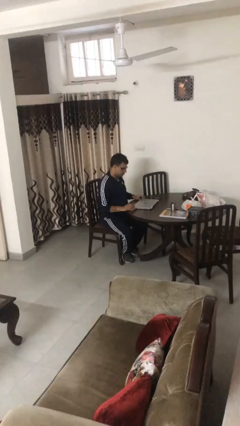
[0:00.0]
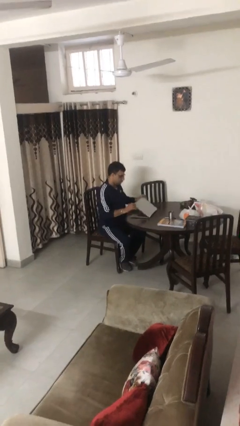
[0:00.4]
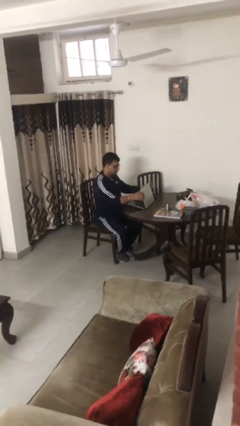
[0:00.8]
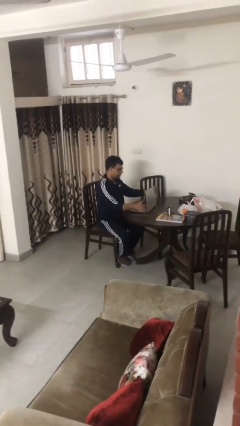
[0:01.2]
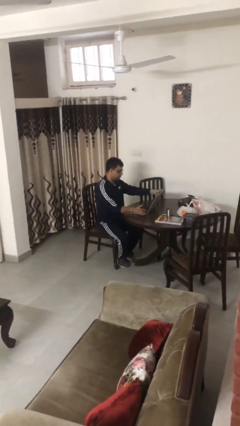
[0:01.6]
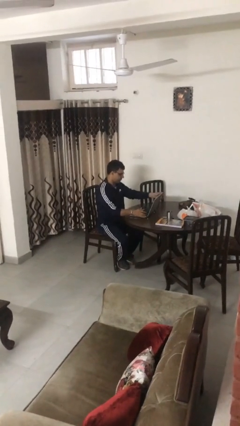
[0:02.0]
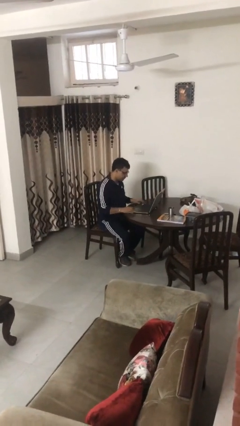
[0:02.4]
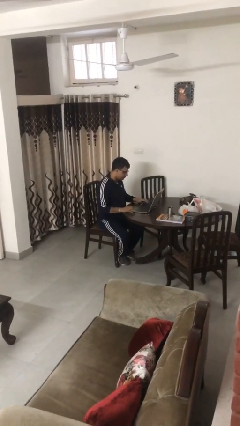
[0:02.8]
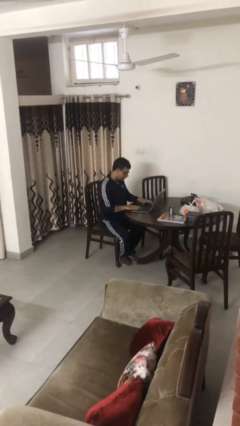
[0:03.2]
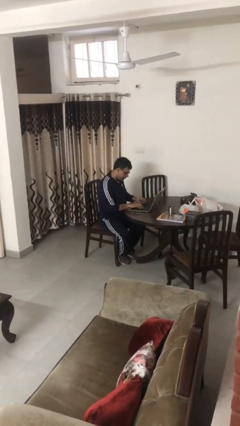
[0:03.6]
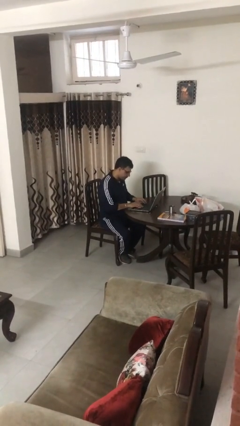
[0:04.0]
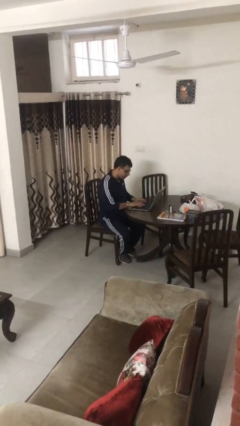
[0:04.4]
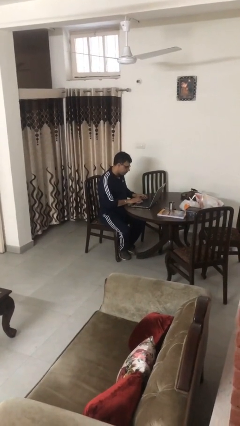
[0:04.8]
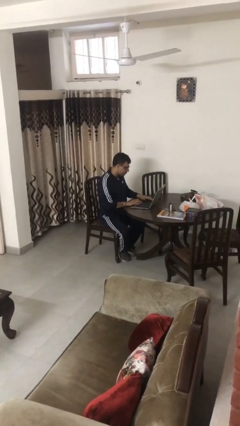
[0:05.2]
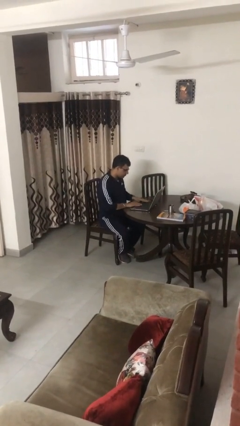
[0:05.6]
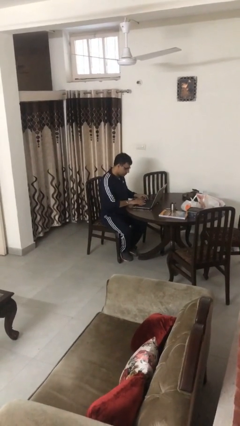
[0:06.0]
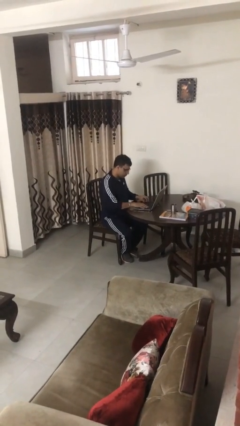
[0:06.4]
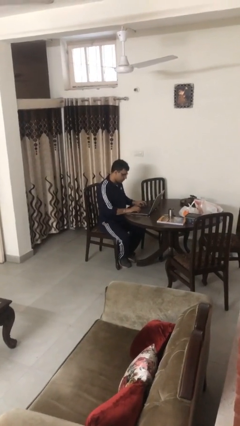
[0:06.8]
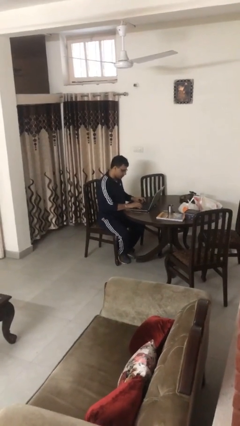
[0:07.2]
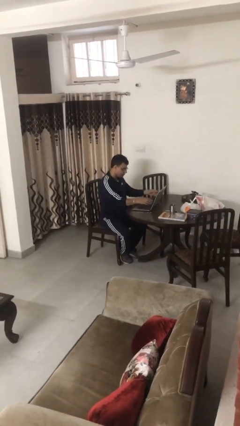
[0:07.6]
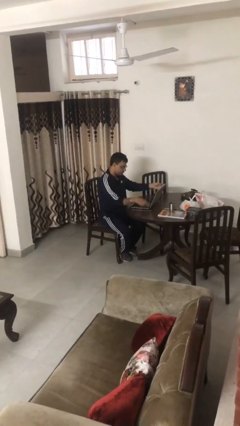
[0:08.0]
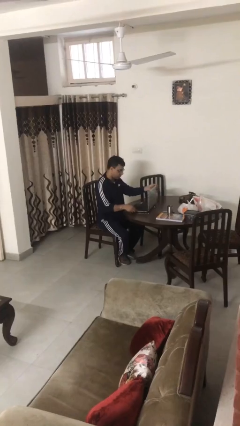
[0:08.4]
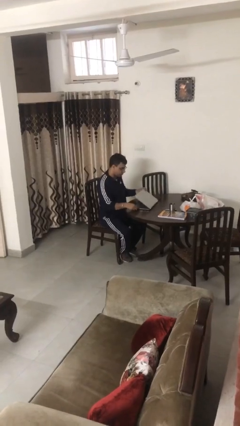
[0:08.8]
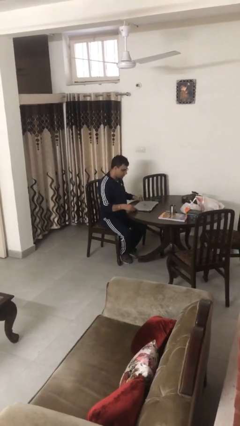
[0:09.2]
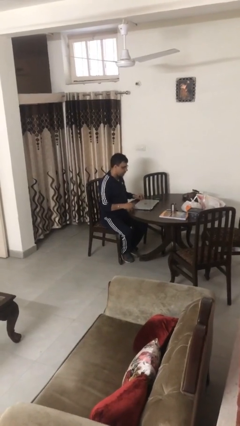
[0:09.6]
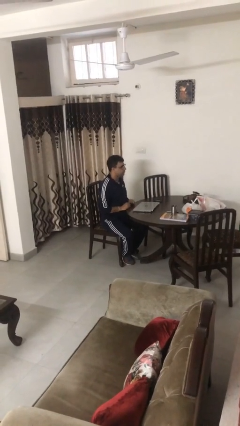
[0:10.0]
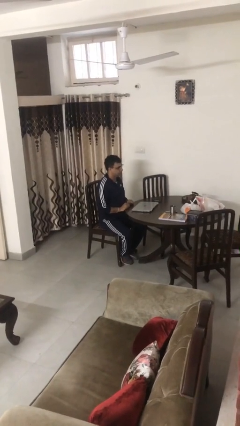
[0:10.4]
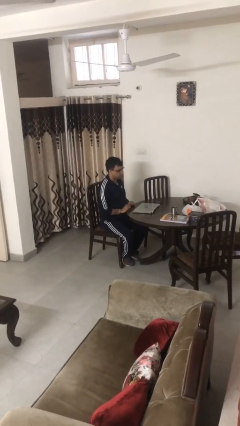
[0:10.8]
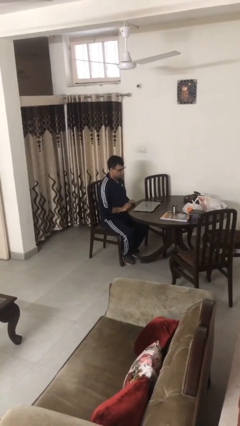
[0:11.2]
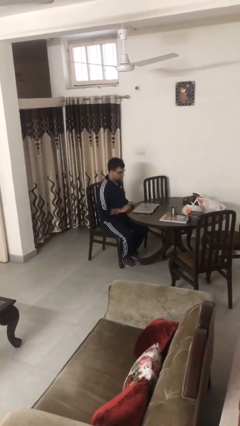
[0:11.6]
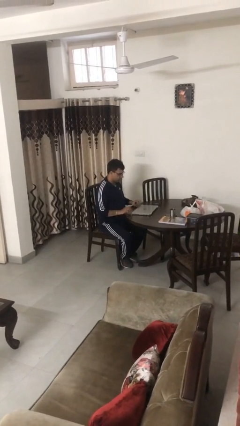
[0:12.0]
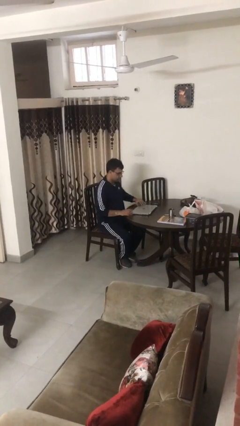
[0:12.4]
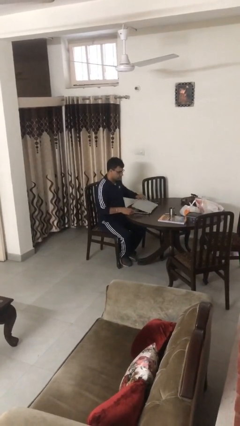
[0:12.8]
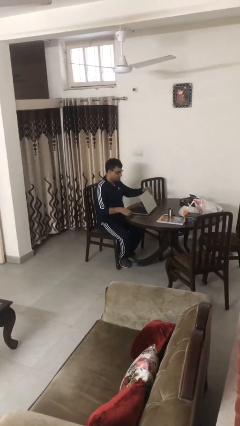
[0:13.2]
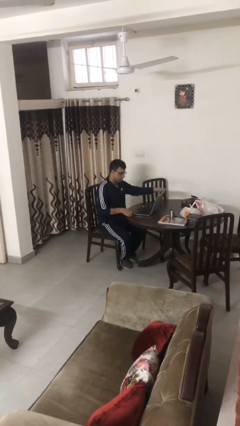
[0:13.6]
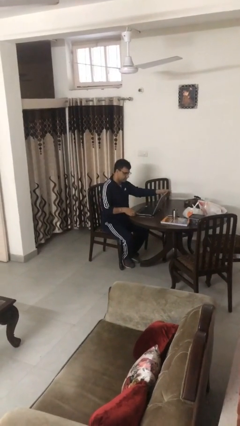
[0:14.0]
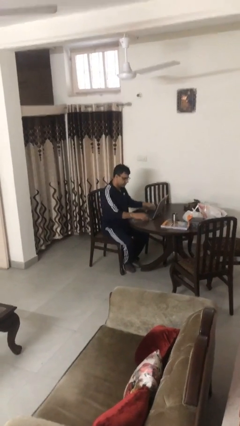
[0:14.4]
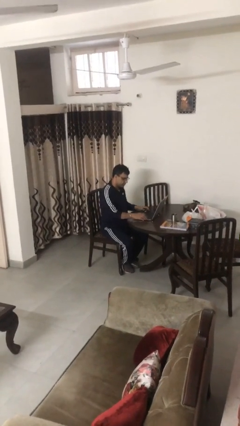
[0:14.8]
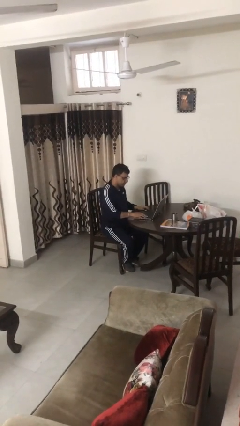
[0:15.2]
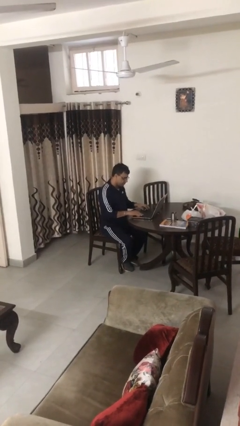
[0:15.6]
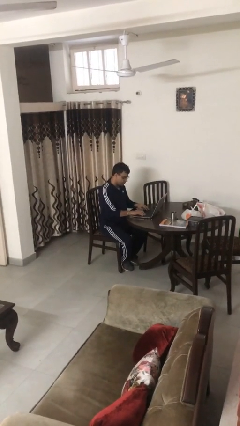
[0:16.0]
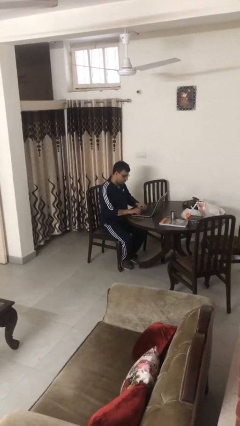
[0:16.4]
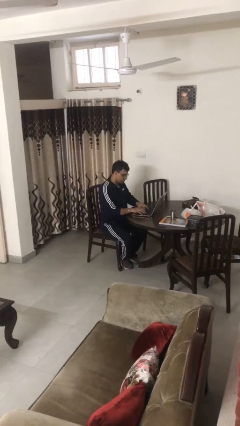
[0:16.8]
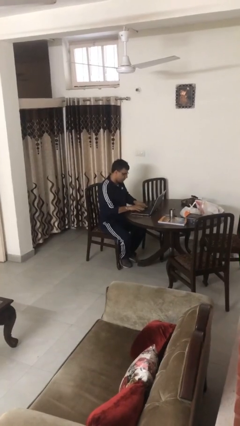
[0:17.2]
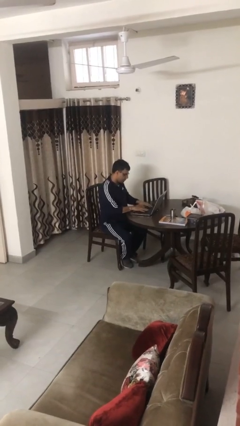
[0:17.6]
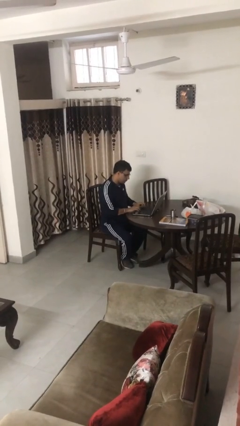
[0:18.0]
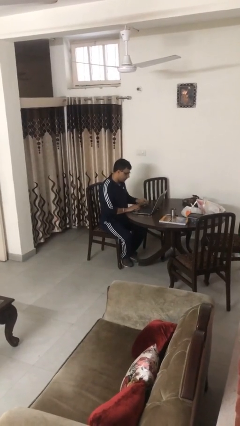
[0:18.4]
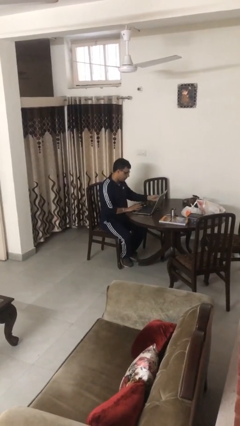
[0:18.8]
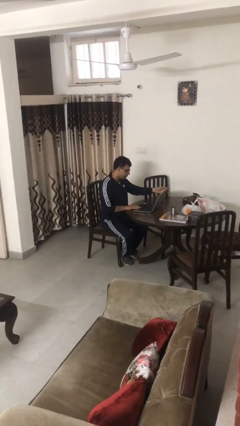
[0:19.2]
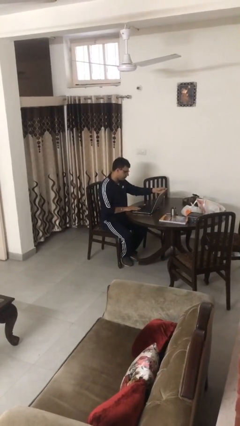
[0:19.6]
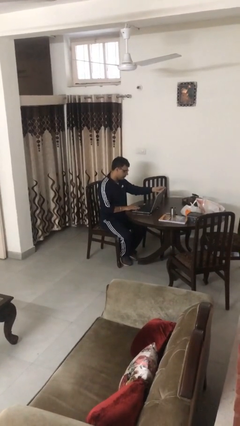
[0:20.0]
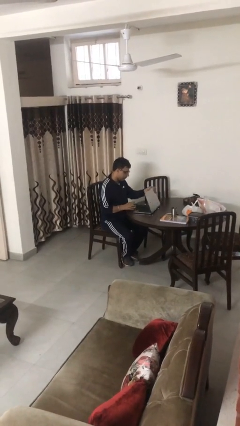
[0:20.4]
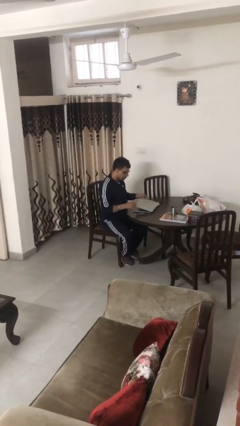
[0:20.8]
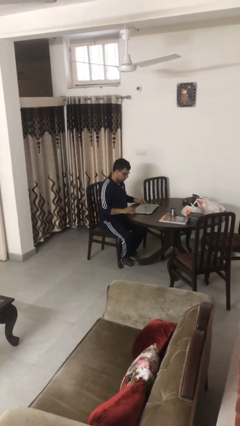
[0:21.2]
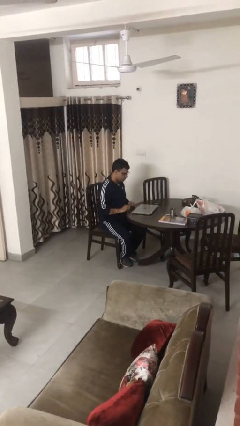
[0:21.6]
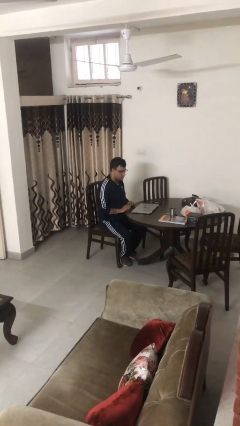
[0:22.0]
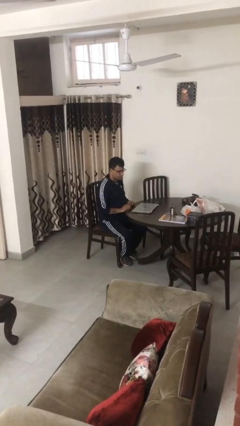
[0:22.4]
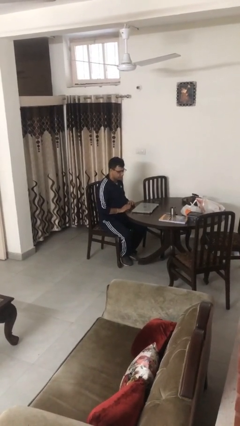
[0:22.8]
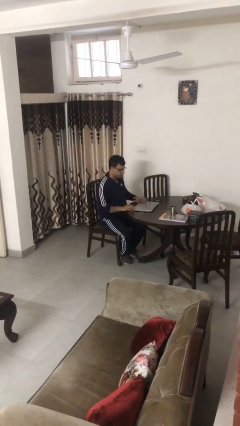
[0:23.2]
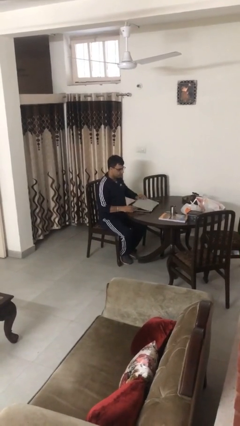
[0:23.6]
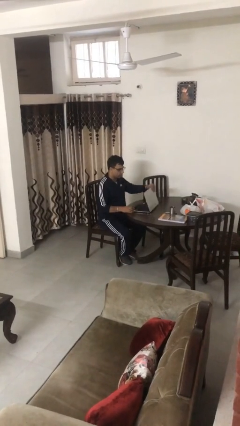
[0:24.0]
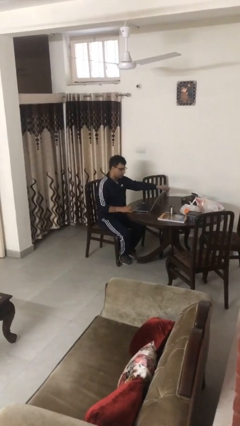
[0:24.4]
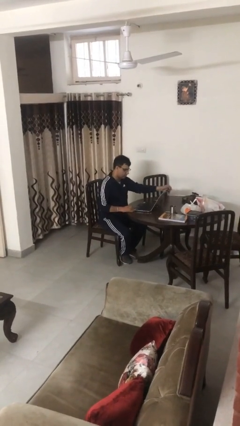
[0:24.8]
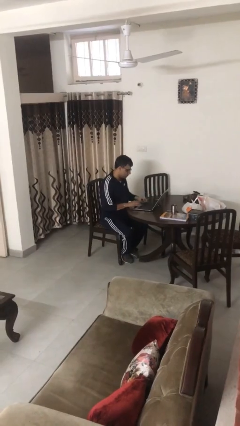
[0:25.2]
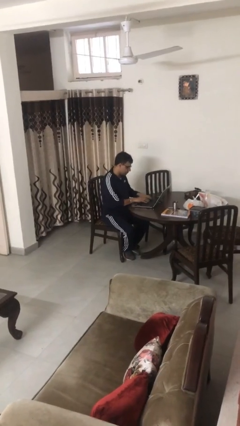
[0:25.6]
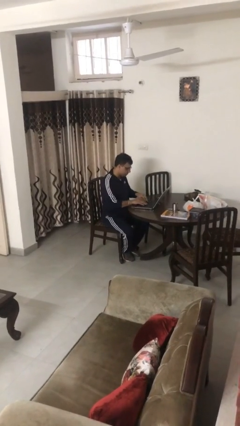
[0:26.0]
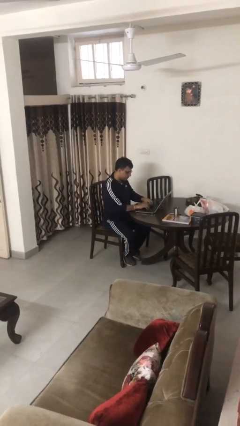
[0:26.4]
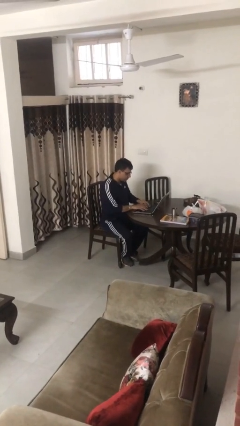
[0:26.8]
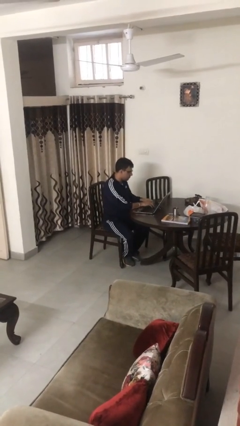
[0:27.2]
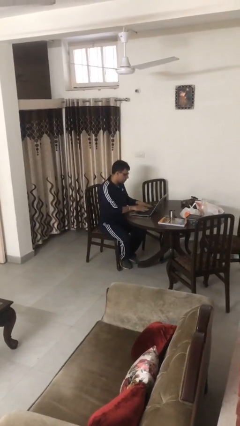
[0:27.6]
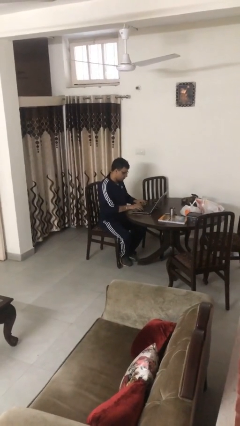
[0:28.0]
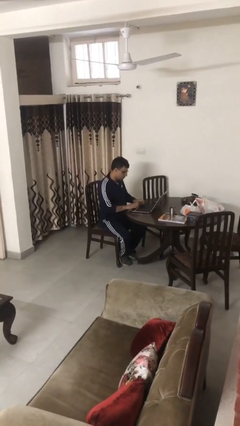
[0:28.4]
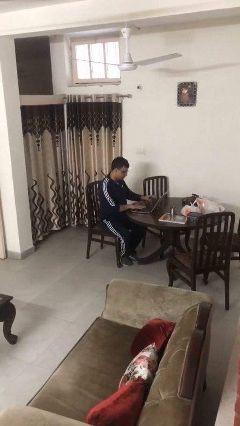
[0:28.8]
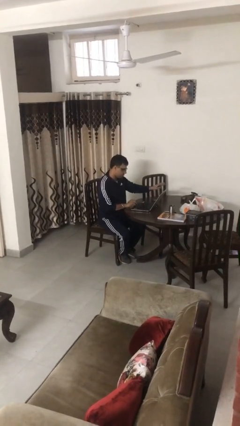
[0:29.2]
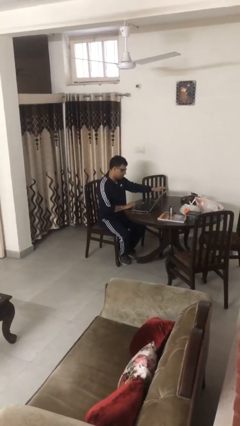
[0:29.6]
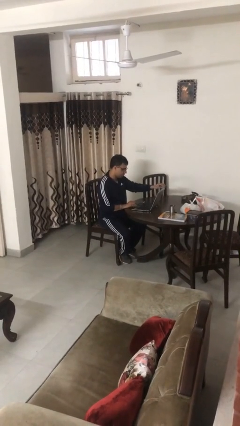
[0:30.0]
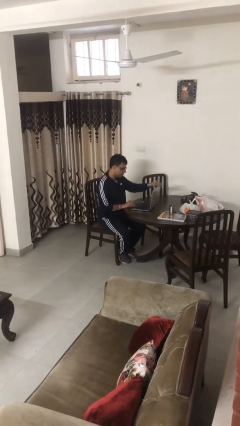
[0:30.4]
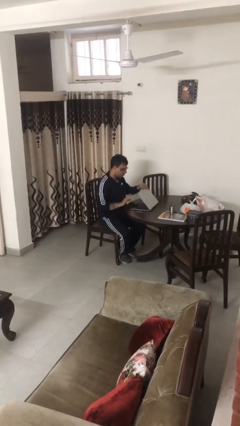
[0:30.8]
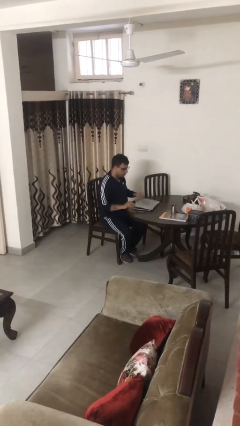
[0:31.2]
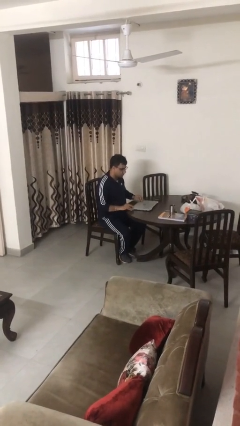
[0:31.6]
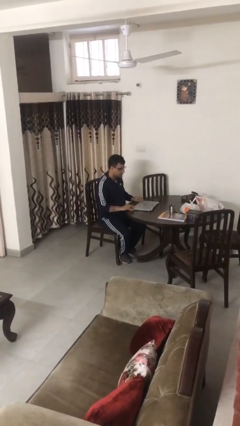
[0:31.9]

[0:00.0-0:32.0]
person interacts with laptop

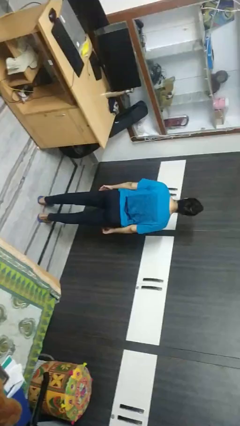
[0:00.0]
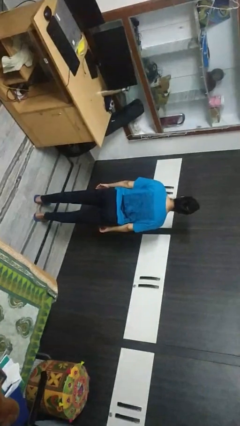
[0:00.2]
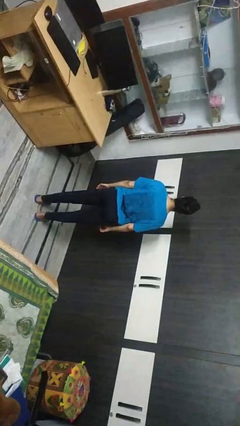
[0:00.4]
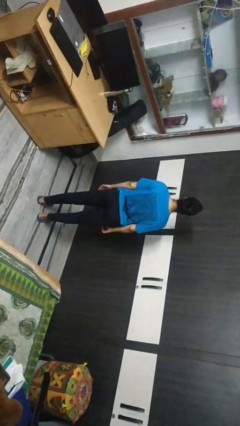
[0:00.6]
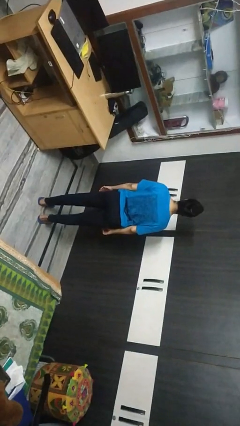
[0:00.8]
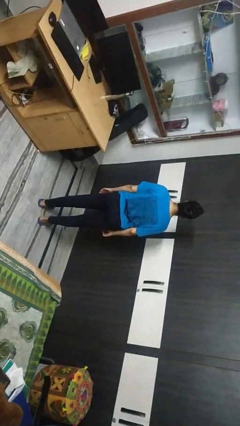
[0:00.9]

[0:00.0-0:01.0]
person puts fingers in ear

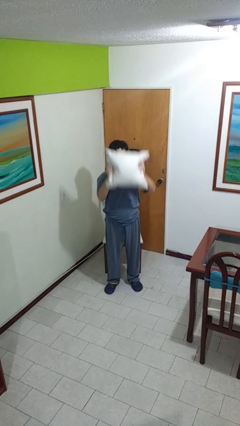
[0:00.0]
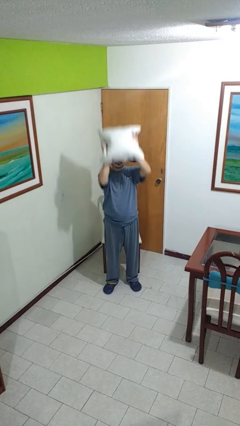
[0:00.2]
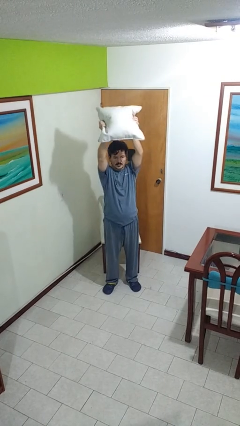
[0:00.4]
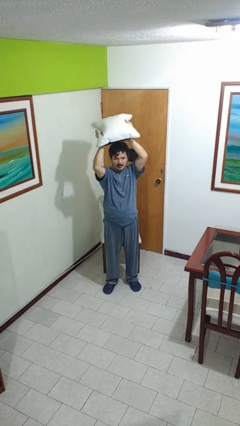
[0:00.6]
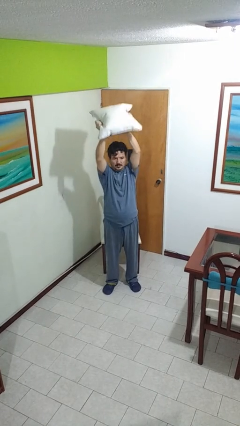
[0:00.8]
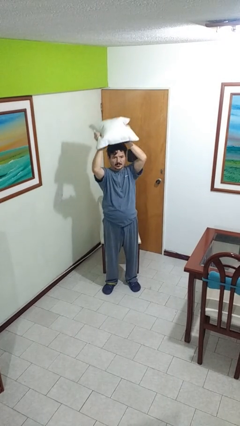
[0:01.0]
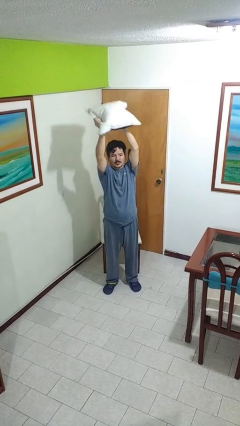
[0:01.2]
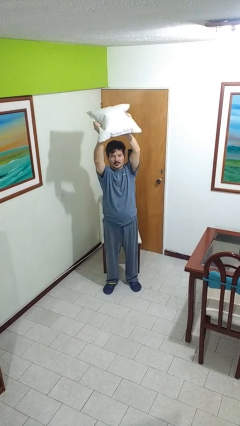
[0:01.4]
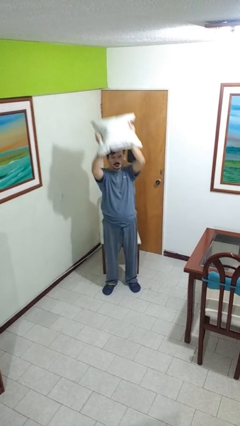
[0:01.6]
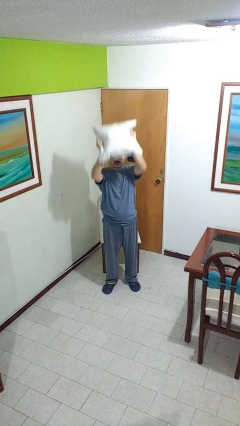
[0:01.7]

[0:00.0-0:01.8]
person holds object above head
